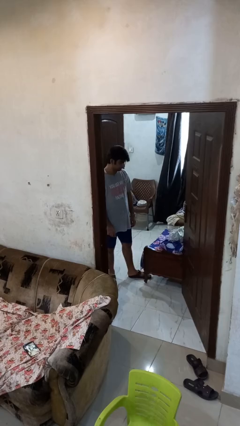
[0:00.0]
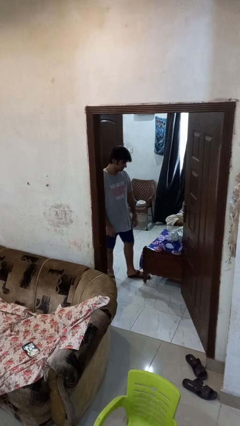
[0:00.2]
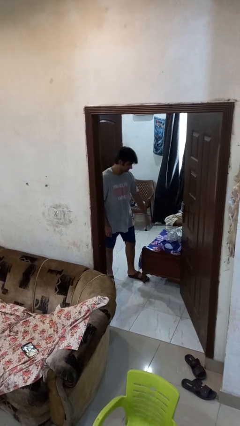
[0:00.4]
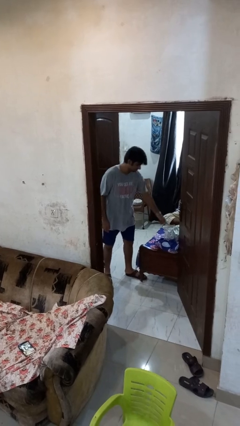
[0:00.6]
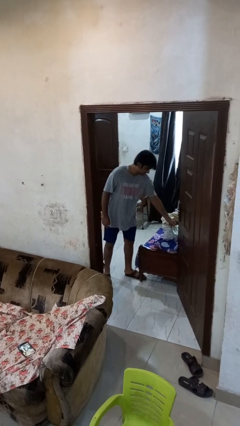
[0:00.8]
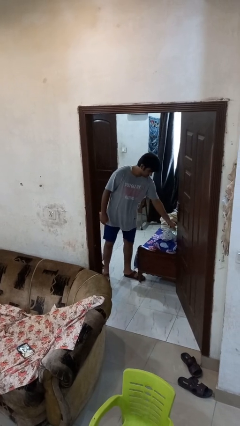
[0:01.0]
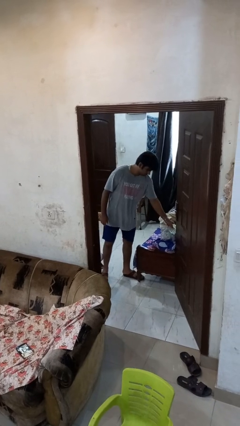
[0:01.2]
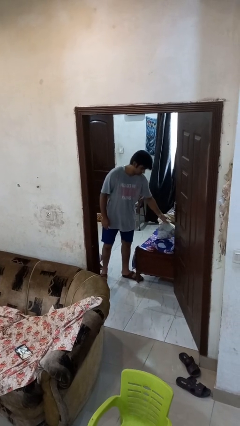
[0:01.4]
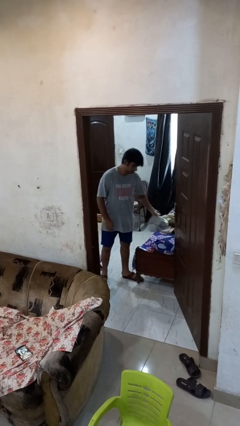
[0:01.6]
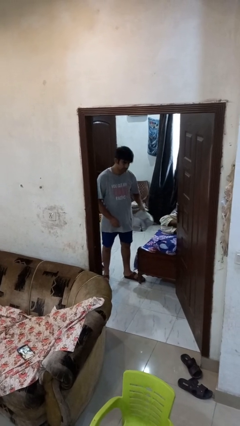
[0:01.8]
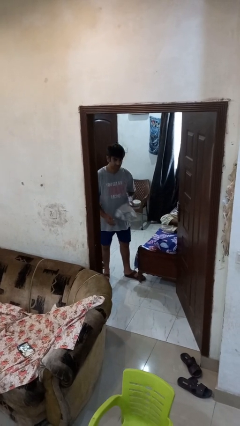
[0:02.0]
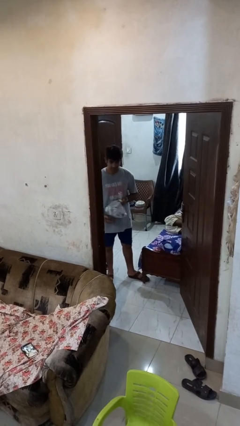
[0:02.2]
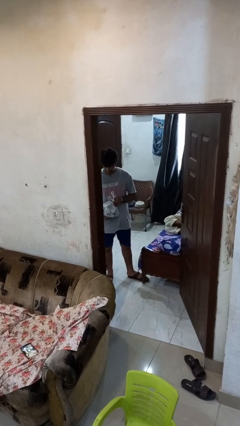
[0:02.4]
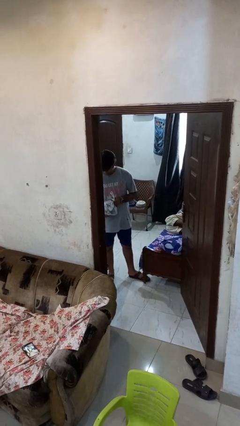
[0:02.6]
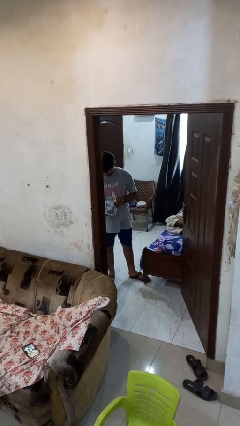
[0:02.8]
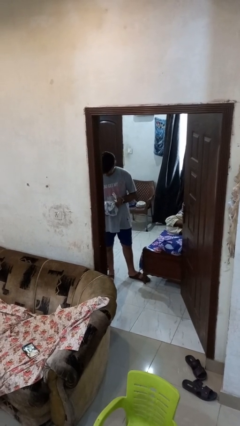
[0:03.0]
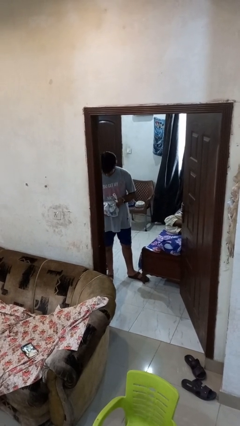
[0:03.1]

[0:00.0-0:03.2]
person picks up object from bed

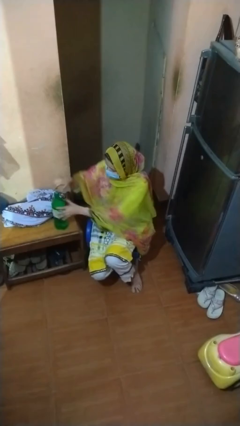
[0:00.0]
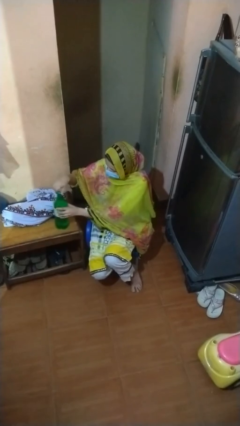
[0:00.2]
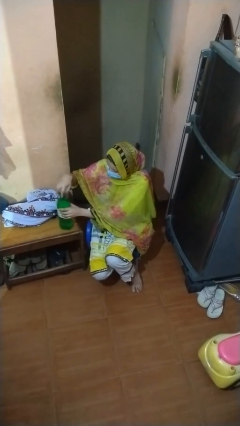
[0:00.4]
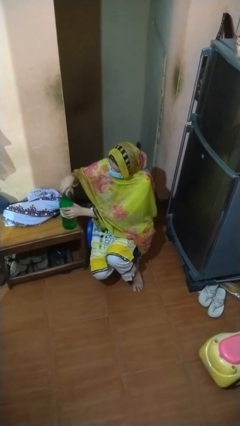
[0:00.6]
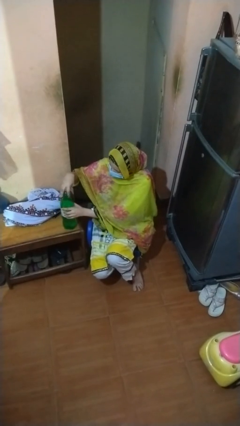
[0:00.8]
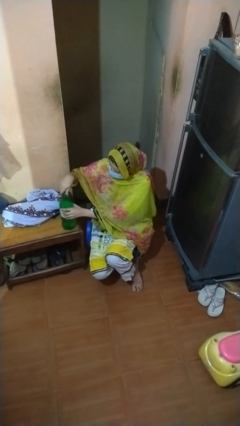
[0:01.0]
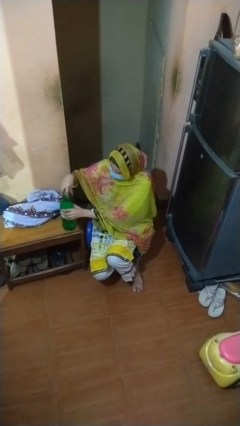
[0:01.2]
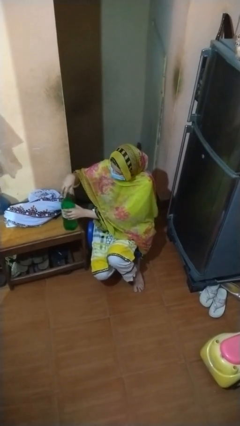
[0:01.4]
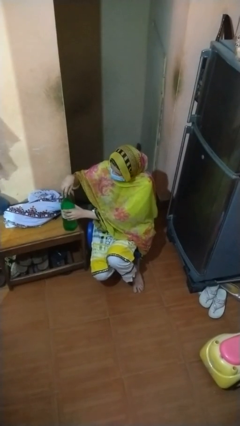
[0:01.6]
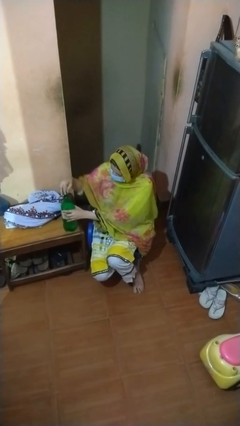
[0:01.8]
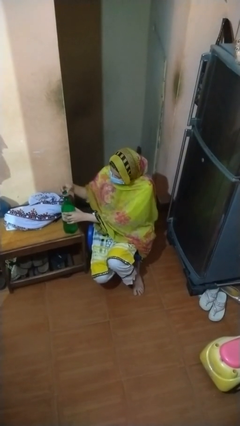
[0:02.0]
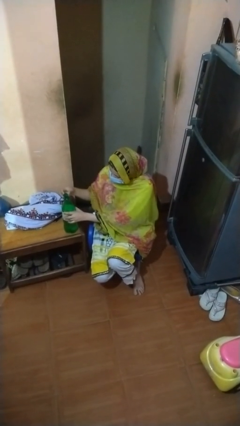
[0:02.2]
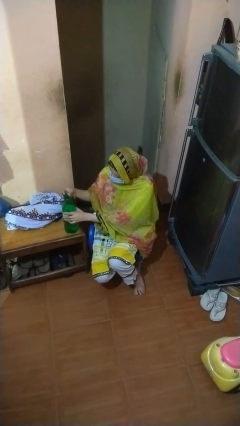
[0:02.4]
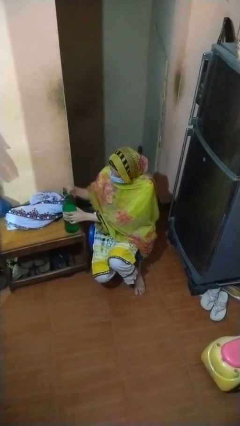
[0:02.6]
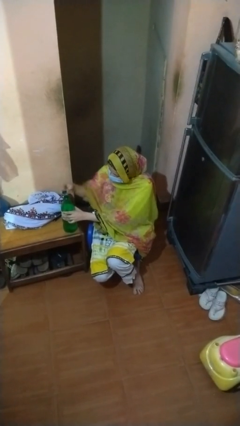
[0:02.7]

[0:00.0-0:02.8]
person unscrews lid from bottle

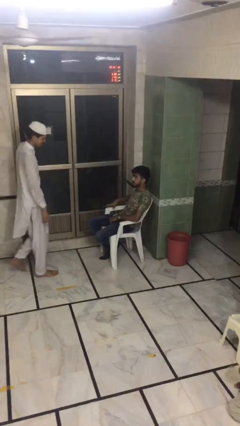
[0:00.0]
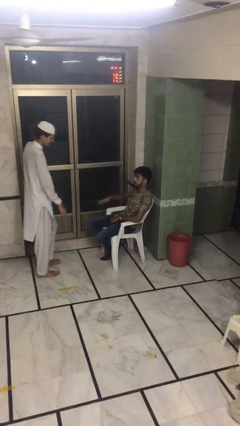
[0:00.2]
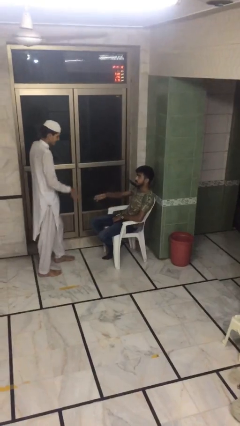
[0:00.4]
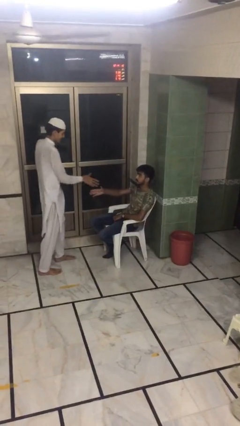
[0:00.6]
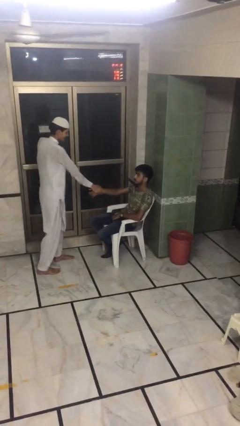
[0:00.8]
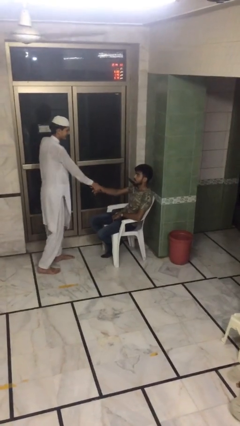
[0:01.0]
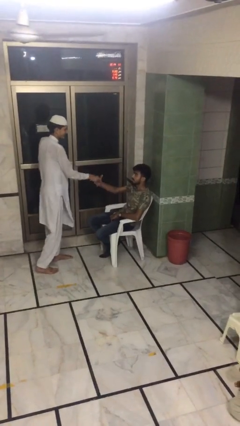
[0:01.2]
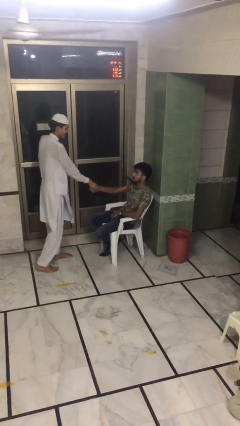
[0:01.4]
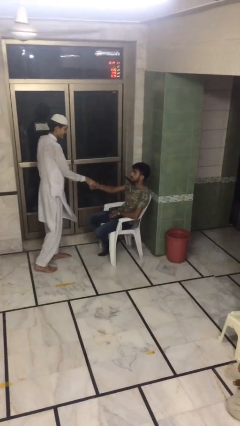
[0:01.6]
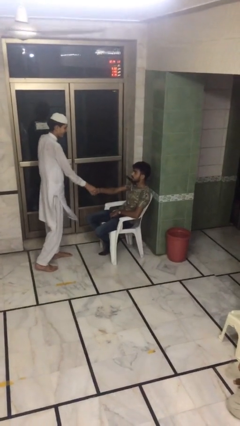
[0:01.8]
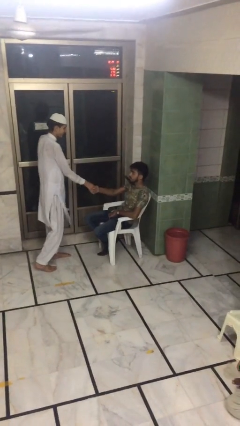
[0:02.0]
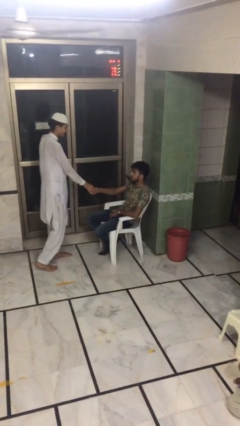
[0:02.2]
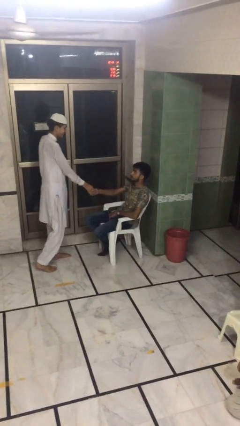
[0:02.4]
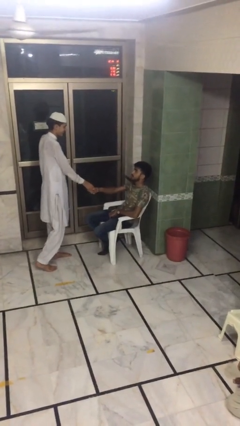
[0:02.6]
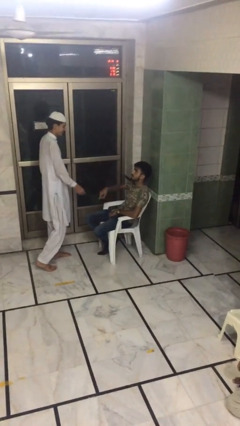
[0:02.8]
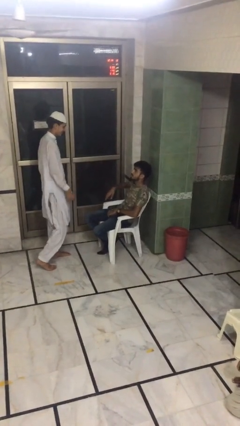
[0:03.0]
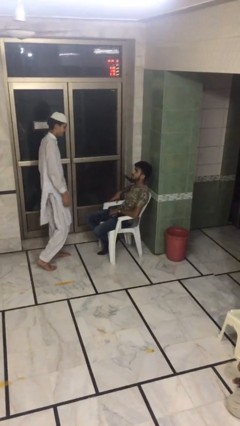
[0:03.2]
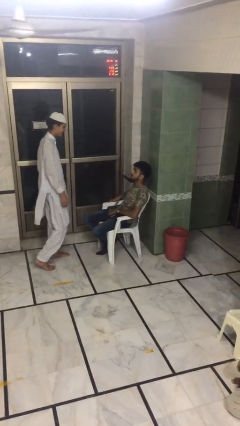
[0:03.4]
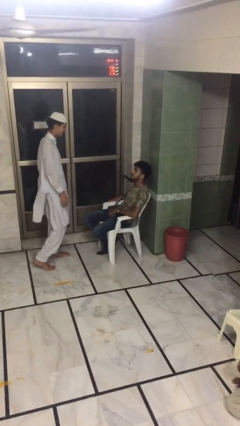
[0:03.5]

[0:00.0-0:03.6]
person shakes hand

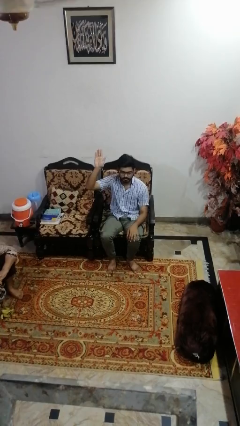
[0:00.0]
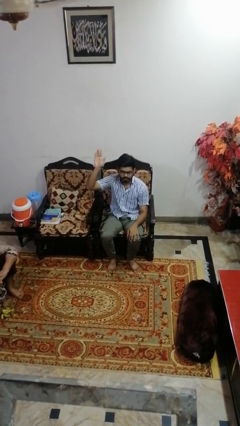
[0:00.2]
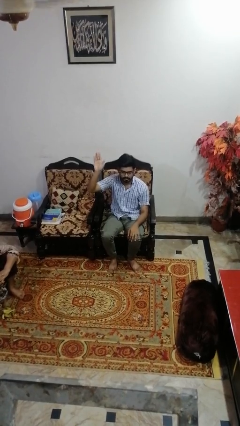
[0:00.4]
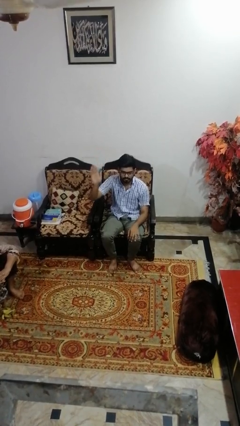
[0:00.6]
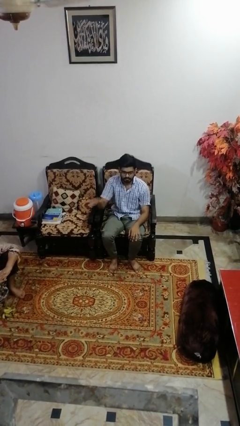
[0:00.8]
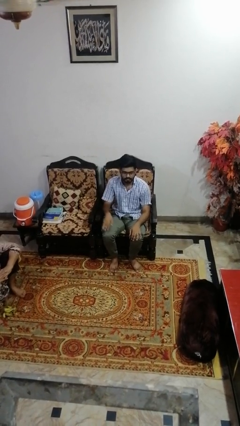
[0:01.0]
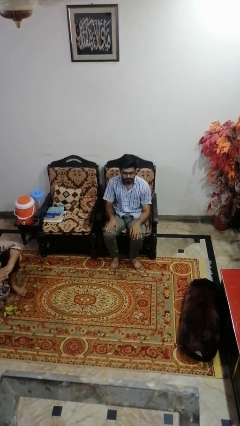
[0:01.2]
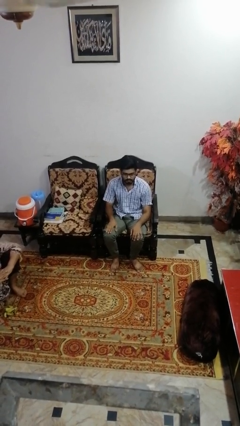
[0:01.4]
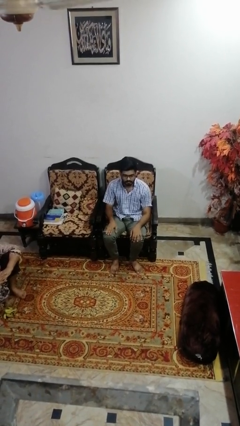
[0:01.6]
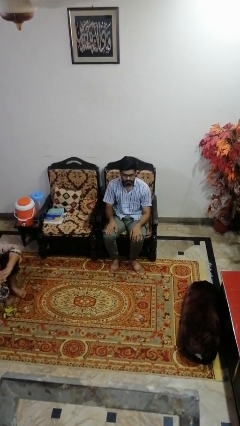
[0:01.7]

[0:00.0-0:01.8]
person gestures lower hand

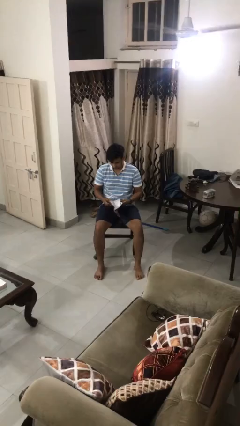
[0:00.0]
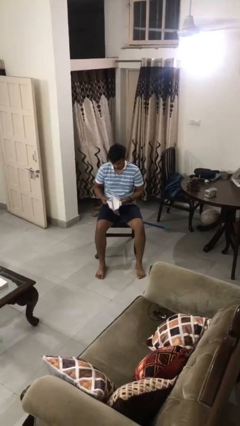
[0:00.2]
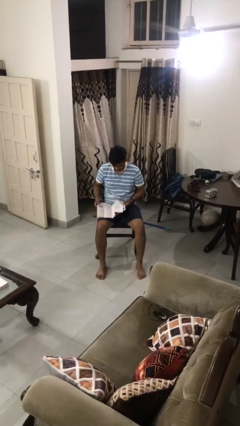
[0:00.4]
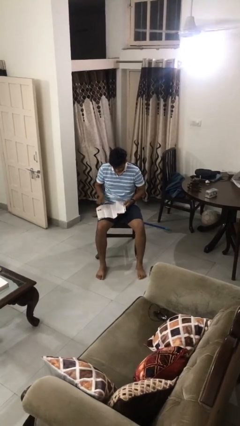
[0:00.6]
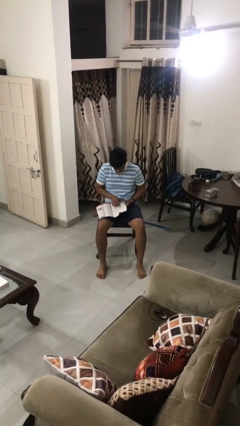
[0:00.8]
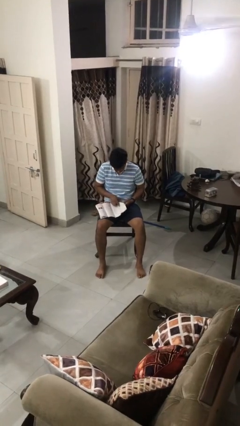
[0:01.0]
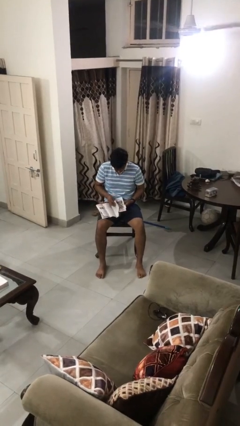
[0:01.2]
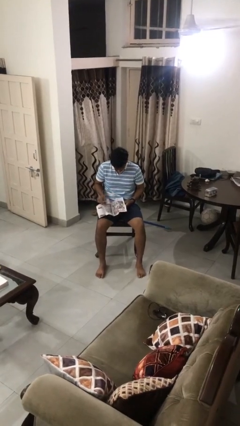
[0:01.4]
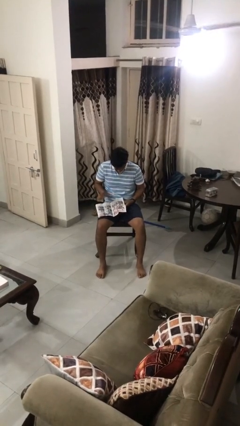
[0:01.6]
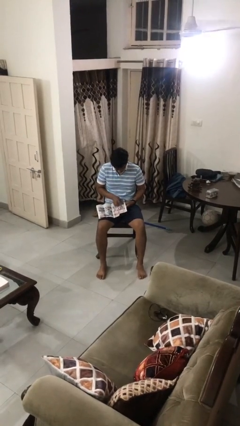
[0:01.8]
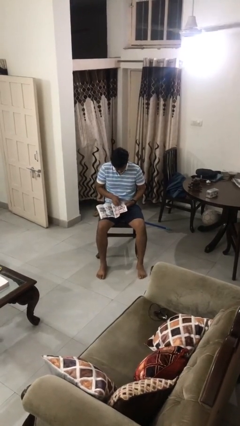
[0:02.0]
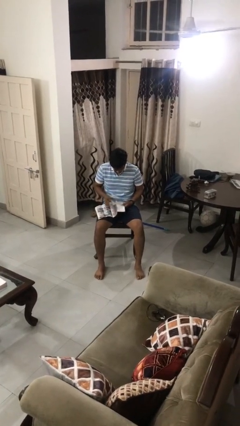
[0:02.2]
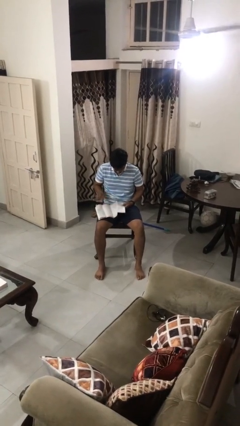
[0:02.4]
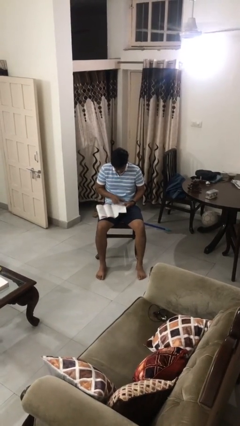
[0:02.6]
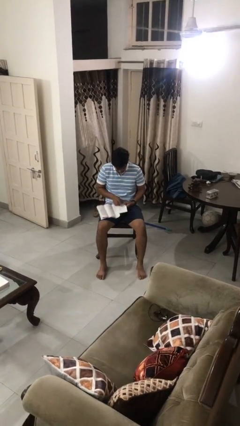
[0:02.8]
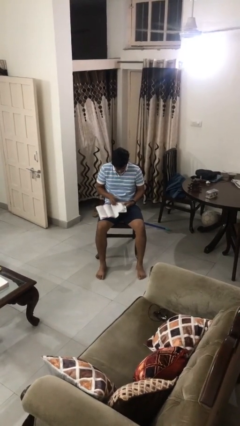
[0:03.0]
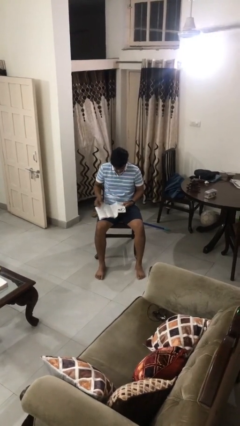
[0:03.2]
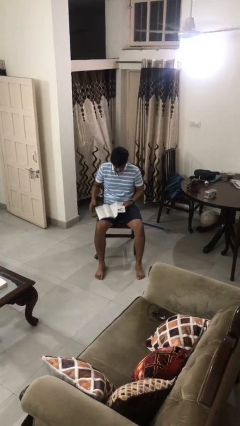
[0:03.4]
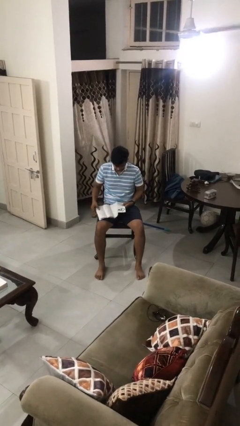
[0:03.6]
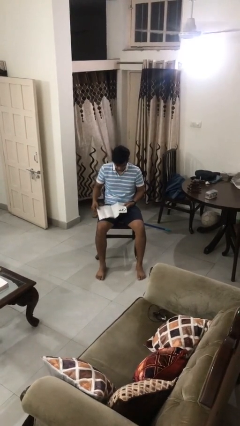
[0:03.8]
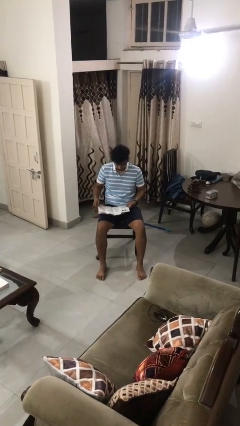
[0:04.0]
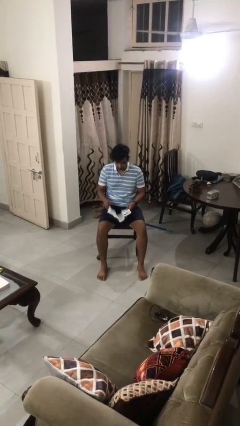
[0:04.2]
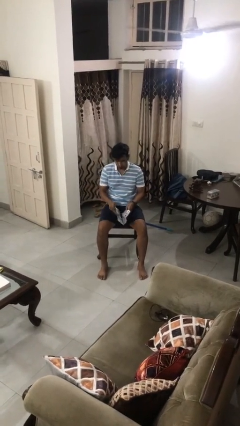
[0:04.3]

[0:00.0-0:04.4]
person reads magazine

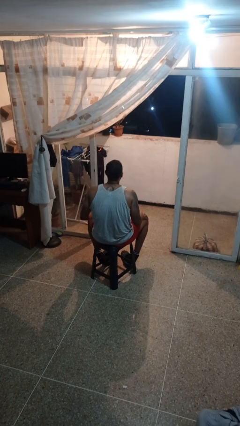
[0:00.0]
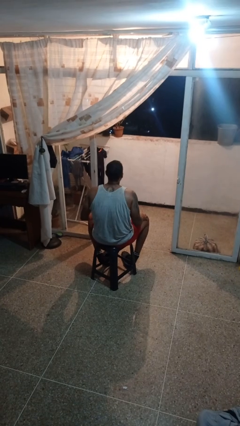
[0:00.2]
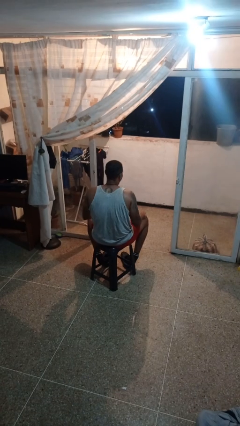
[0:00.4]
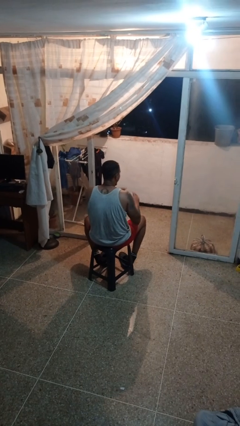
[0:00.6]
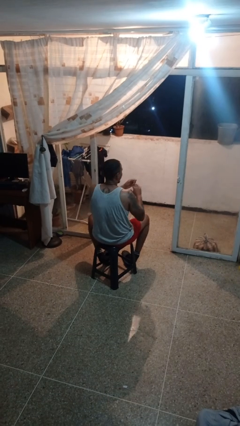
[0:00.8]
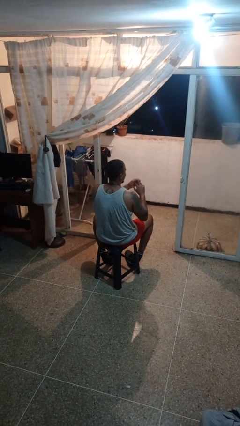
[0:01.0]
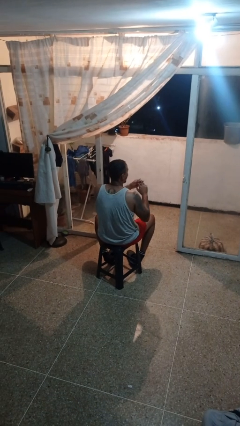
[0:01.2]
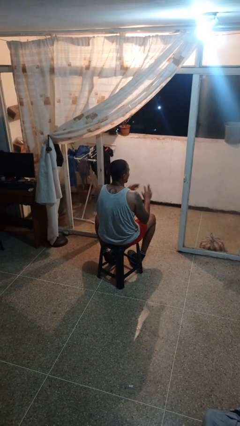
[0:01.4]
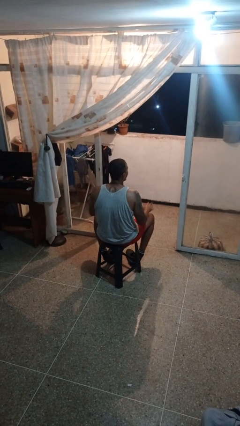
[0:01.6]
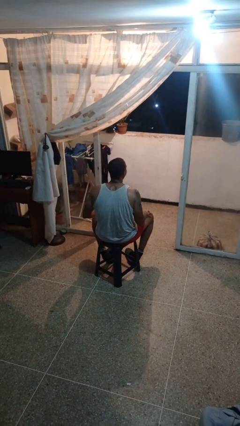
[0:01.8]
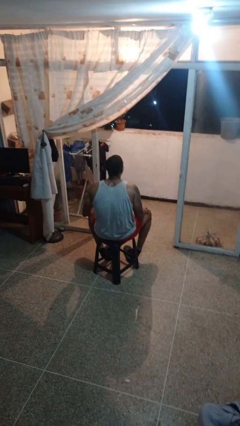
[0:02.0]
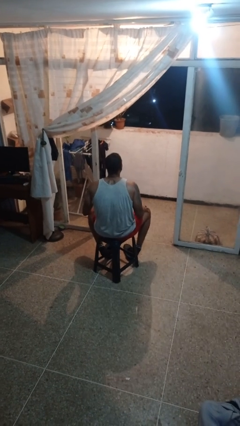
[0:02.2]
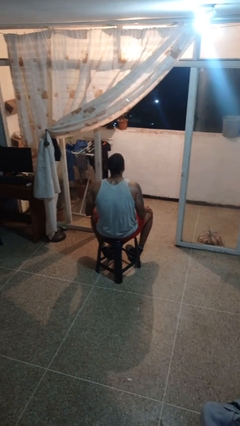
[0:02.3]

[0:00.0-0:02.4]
person puts on ring
